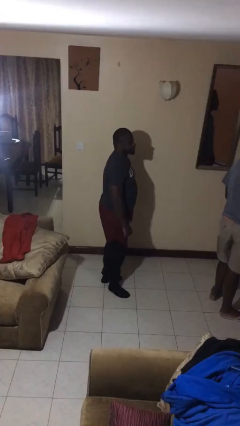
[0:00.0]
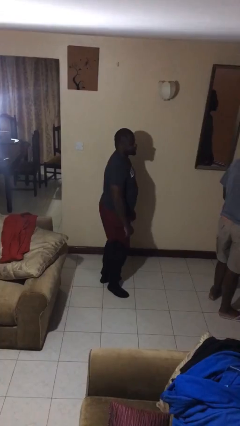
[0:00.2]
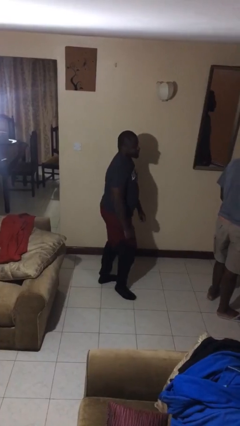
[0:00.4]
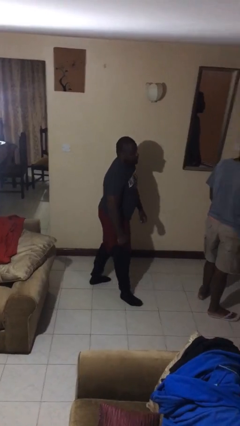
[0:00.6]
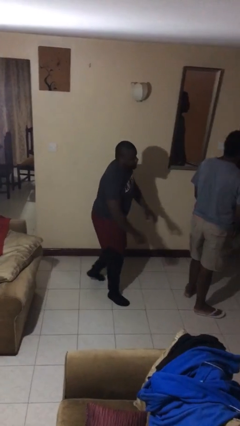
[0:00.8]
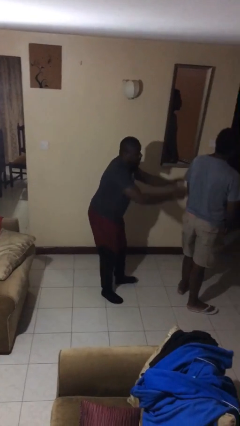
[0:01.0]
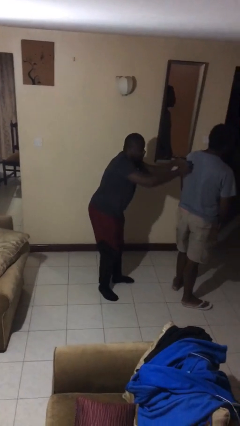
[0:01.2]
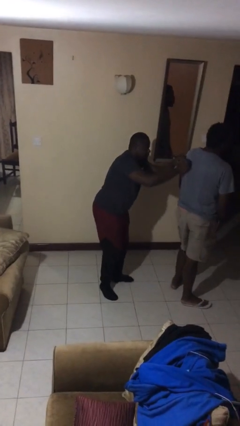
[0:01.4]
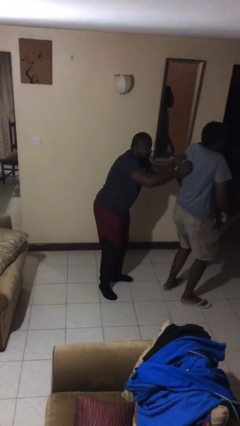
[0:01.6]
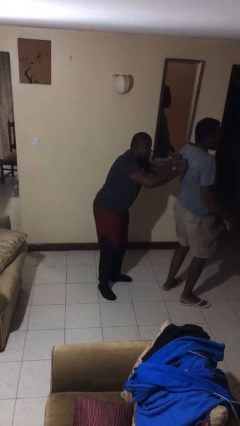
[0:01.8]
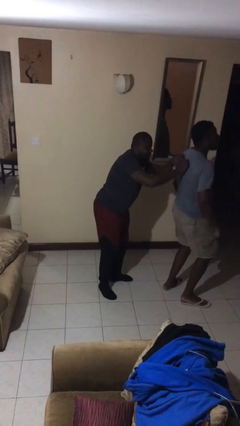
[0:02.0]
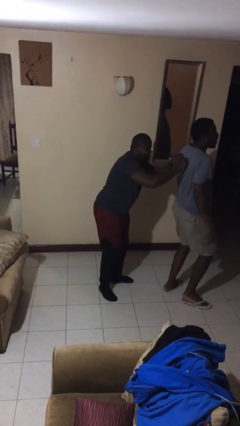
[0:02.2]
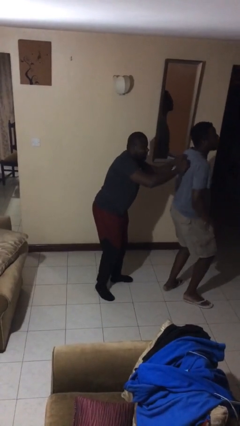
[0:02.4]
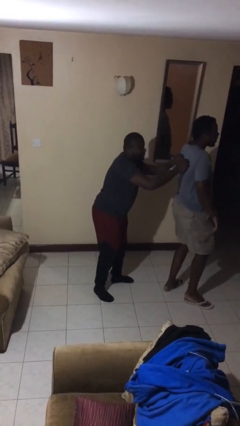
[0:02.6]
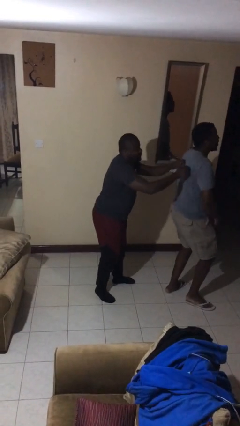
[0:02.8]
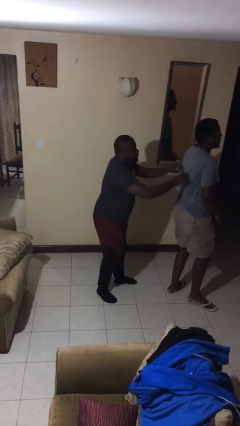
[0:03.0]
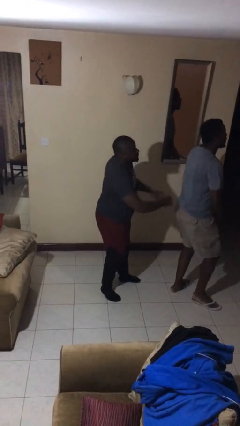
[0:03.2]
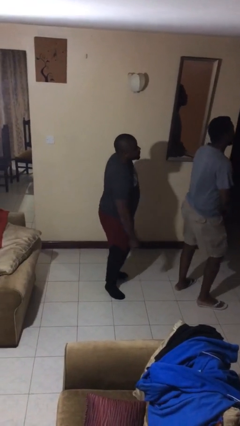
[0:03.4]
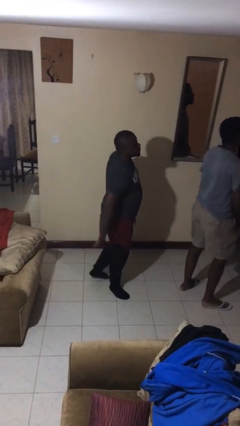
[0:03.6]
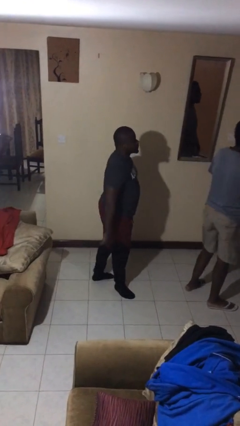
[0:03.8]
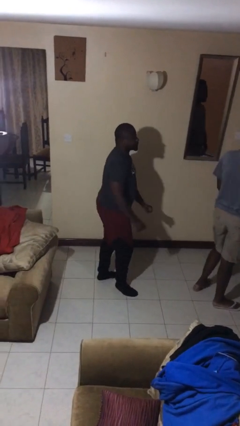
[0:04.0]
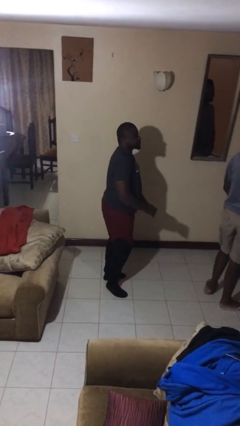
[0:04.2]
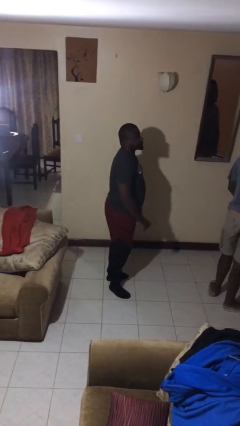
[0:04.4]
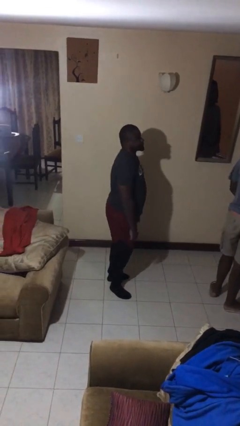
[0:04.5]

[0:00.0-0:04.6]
person tickles person

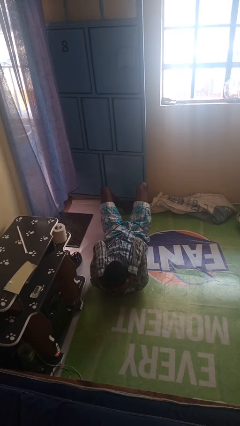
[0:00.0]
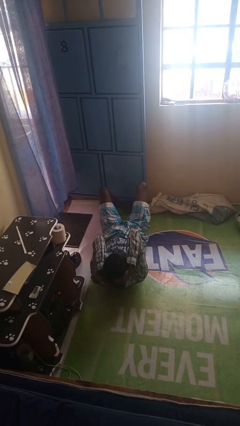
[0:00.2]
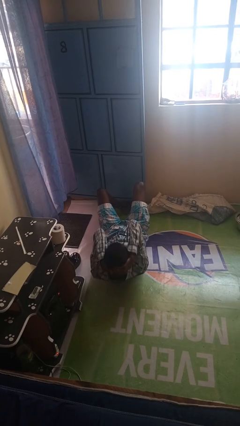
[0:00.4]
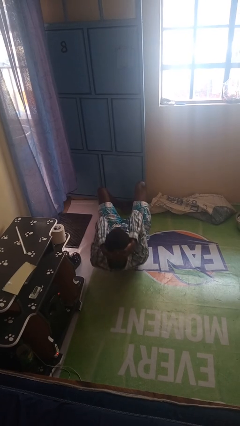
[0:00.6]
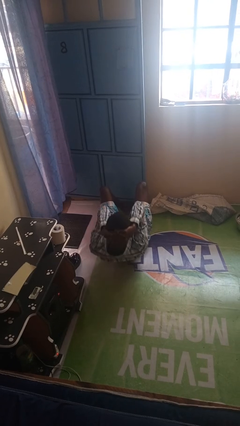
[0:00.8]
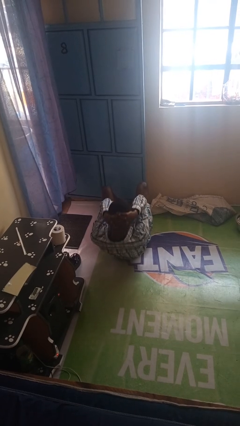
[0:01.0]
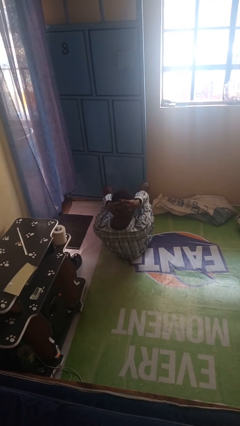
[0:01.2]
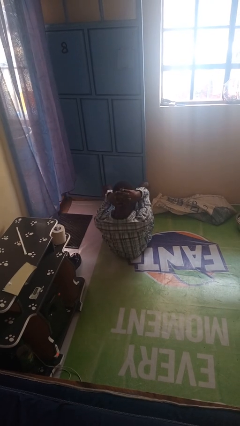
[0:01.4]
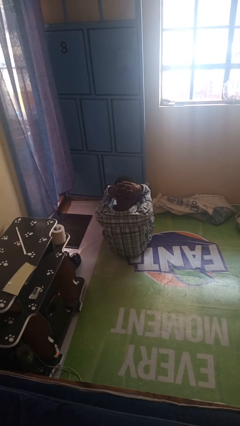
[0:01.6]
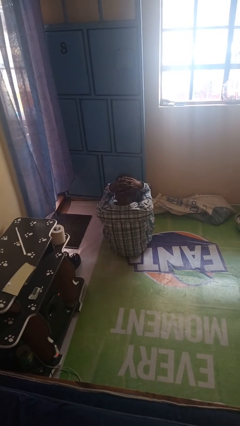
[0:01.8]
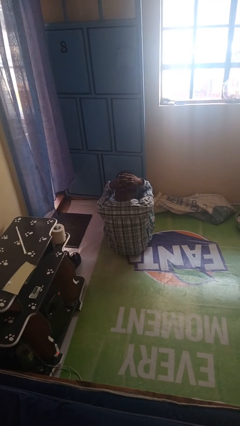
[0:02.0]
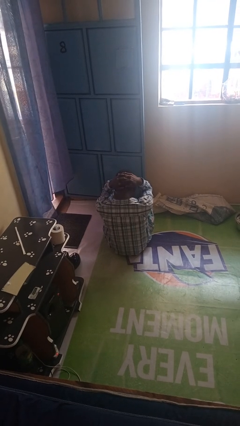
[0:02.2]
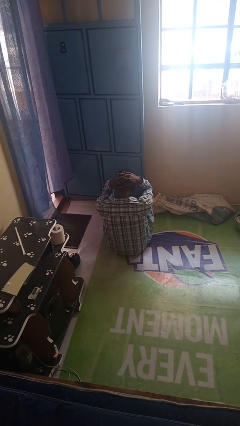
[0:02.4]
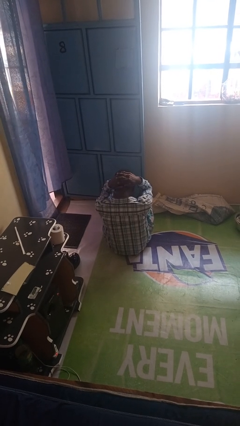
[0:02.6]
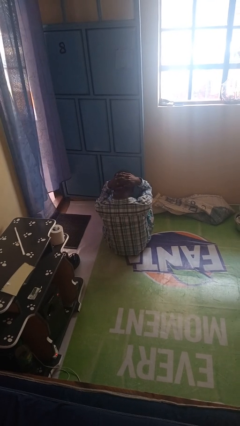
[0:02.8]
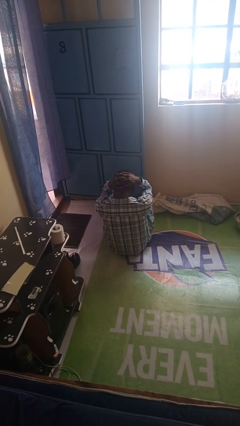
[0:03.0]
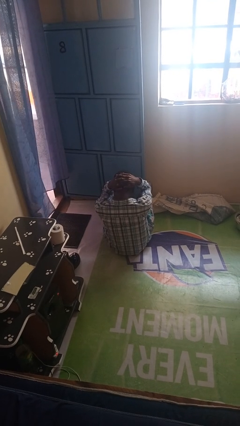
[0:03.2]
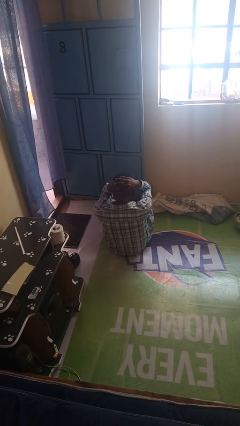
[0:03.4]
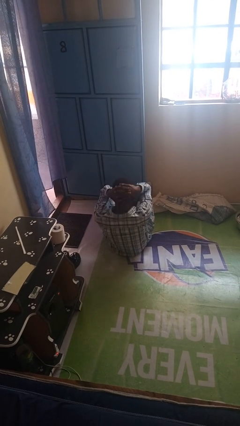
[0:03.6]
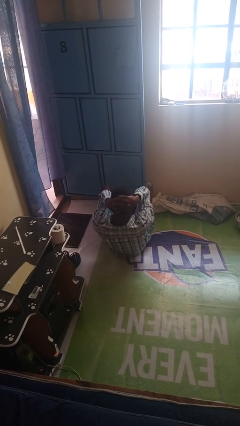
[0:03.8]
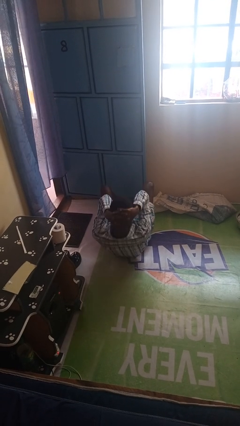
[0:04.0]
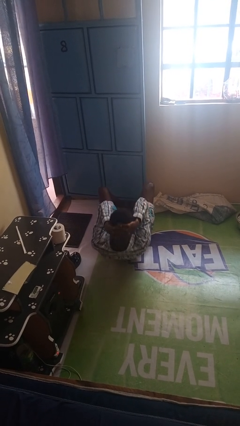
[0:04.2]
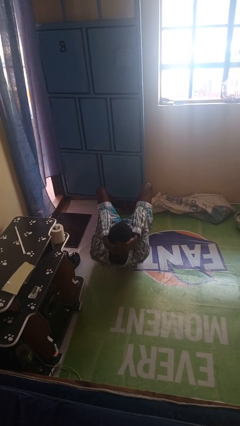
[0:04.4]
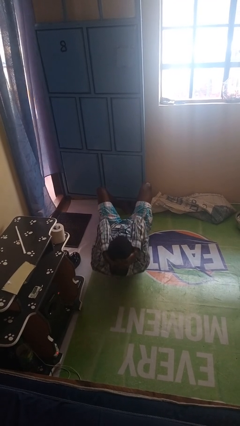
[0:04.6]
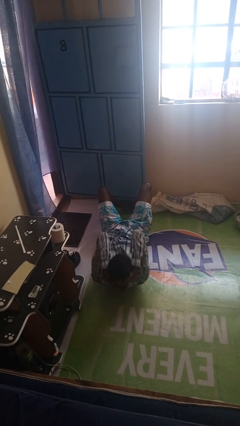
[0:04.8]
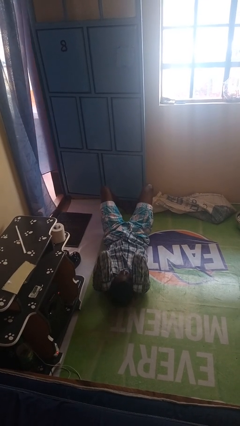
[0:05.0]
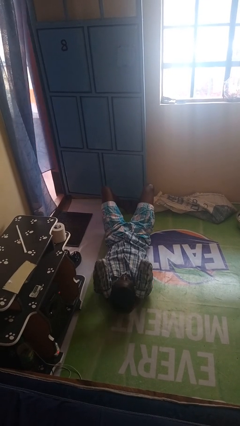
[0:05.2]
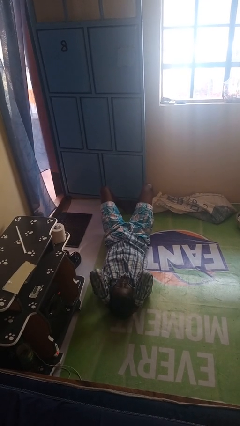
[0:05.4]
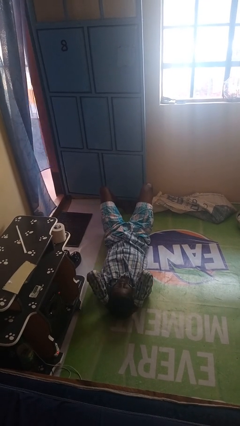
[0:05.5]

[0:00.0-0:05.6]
person exercises with situp

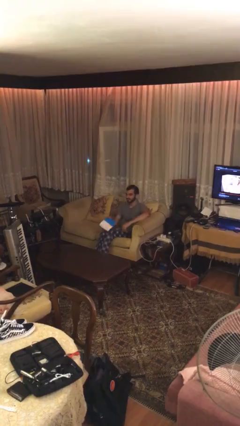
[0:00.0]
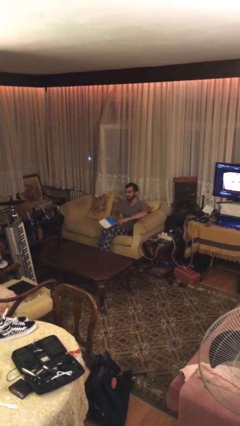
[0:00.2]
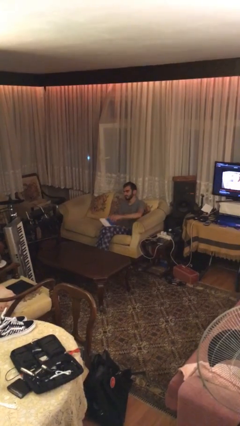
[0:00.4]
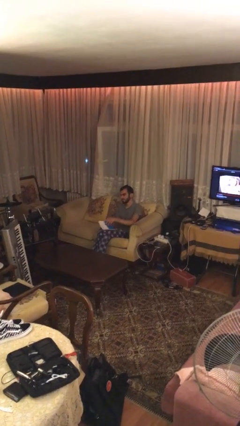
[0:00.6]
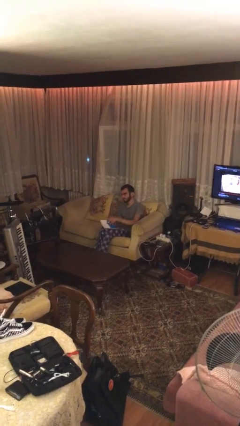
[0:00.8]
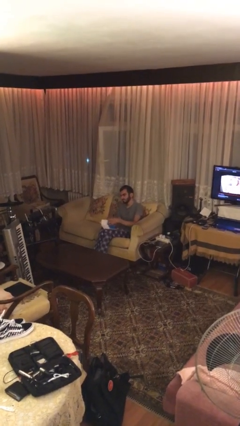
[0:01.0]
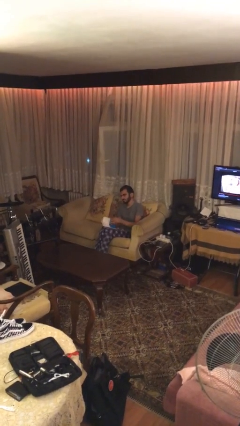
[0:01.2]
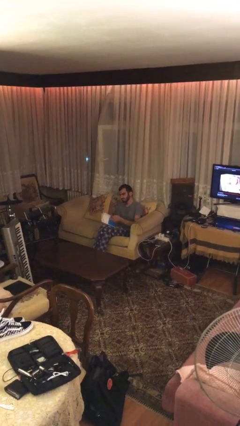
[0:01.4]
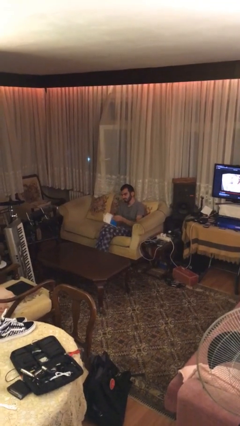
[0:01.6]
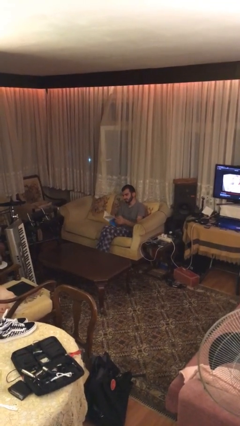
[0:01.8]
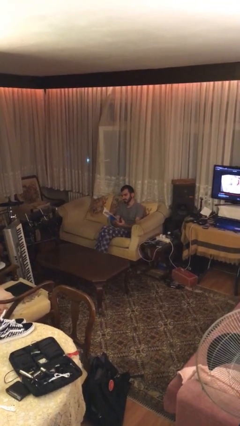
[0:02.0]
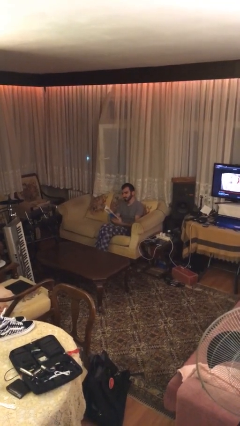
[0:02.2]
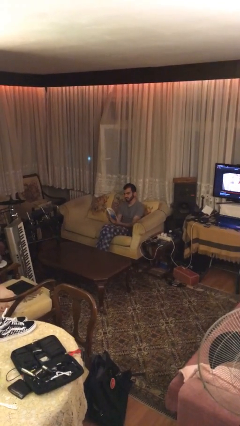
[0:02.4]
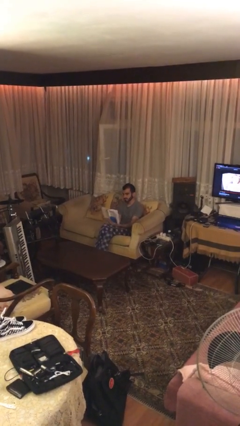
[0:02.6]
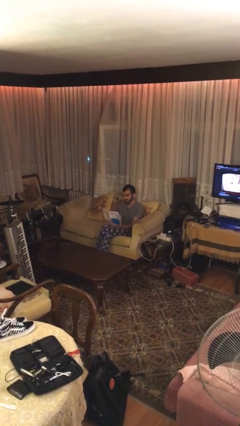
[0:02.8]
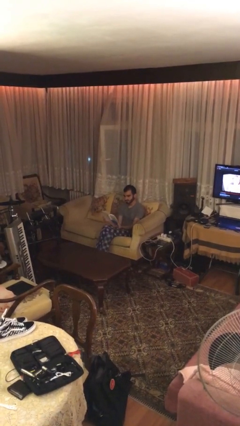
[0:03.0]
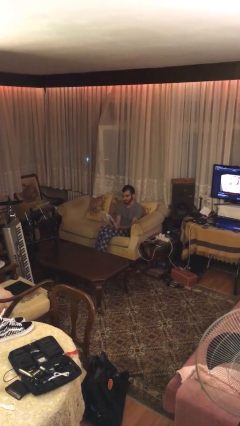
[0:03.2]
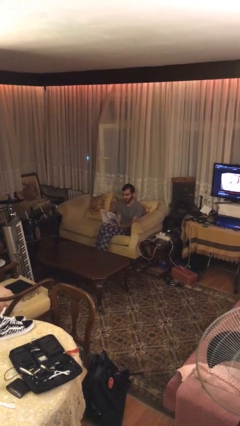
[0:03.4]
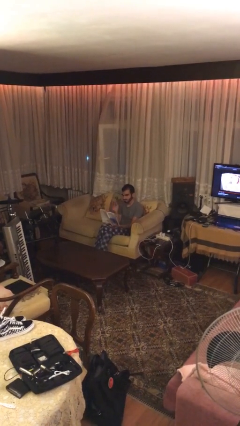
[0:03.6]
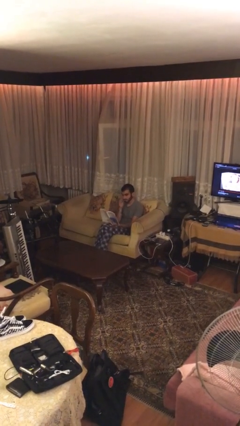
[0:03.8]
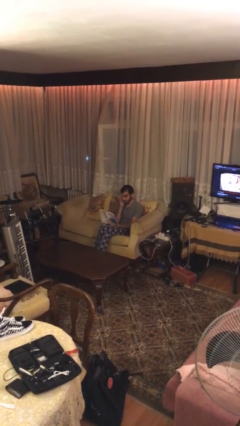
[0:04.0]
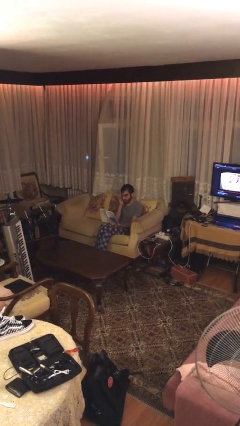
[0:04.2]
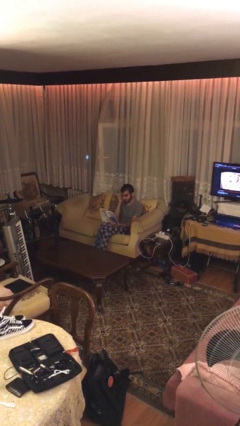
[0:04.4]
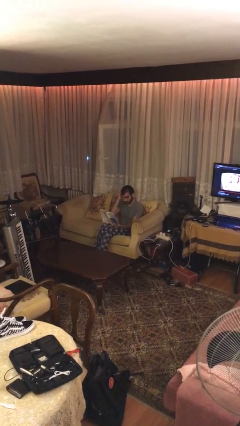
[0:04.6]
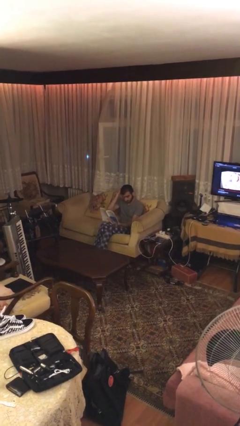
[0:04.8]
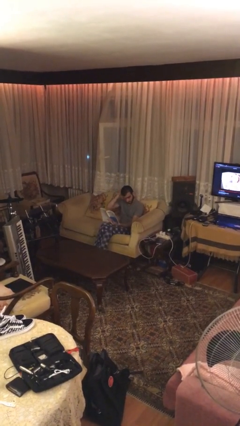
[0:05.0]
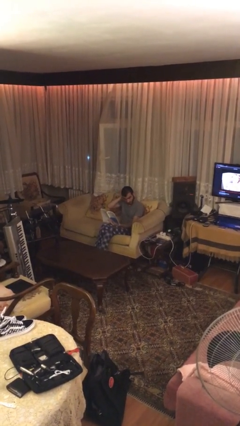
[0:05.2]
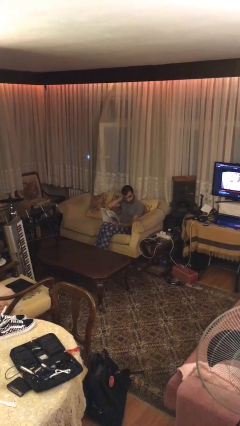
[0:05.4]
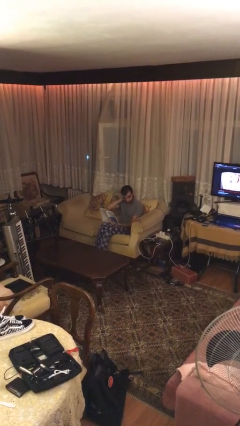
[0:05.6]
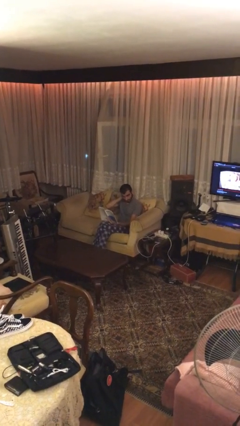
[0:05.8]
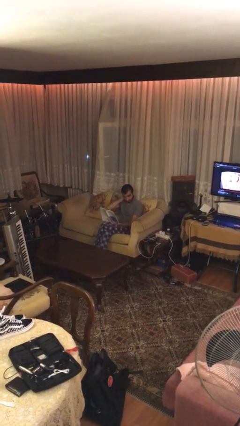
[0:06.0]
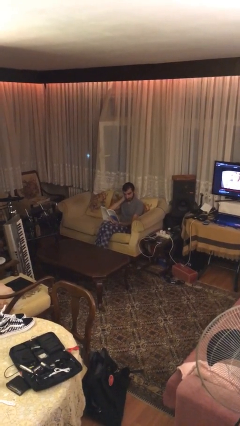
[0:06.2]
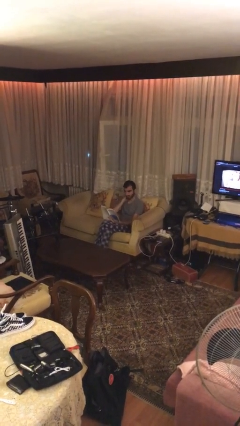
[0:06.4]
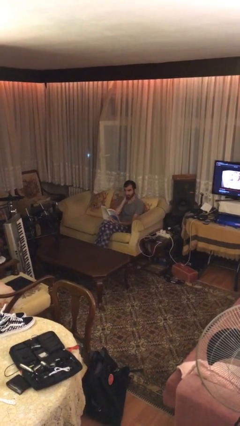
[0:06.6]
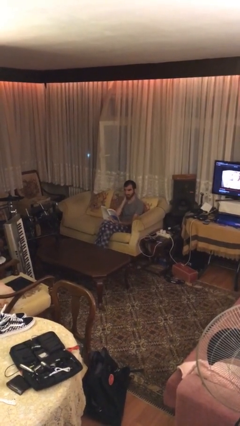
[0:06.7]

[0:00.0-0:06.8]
person reads document

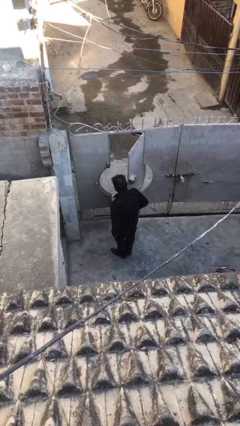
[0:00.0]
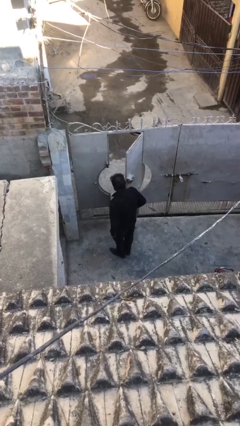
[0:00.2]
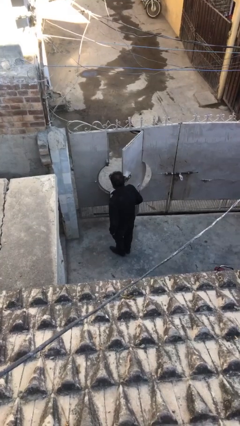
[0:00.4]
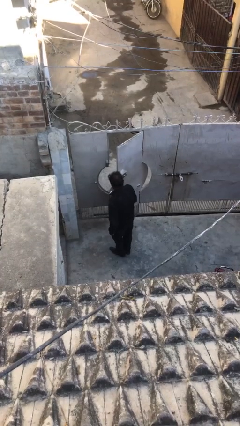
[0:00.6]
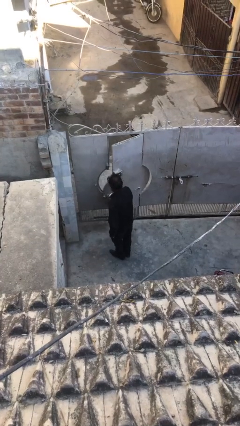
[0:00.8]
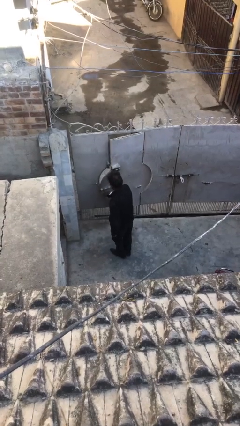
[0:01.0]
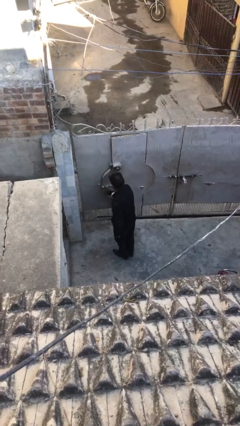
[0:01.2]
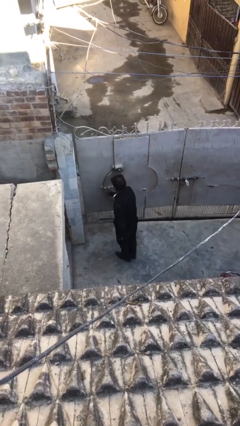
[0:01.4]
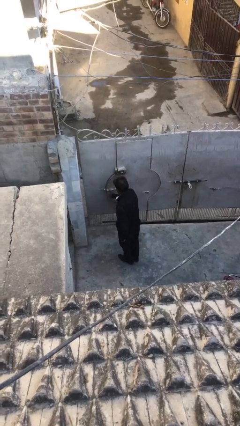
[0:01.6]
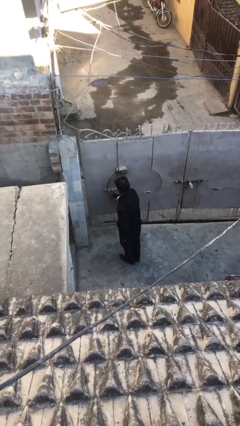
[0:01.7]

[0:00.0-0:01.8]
person closes facility door
